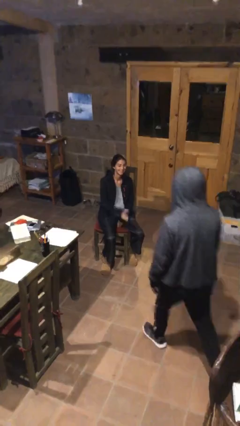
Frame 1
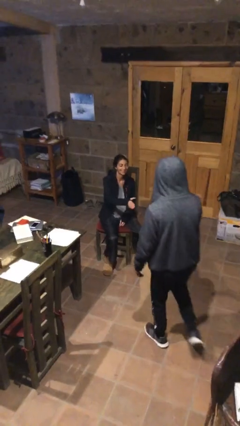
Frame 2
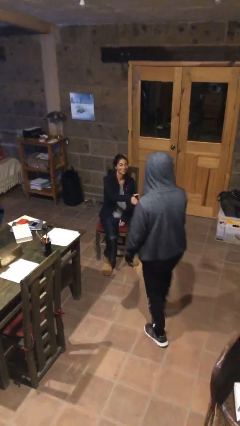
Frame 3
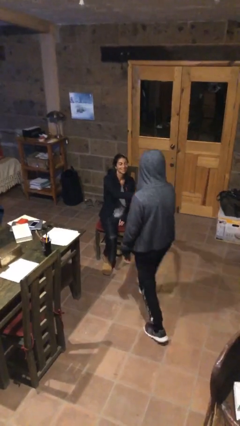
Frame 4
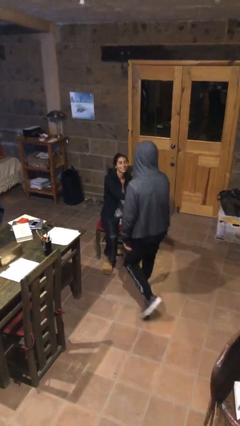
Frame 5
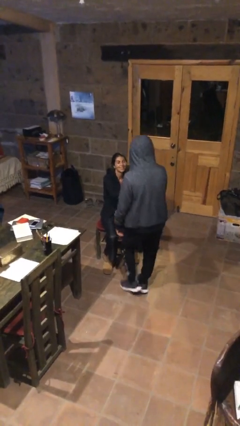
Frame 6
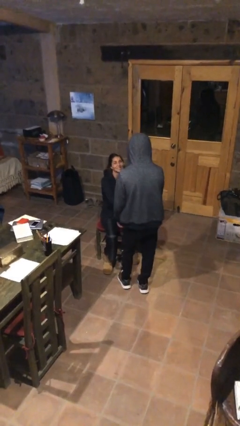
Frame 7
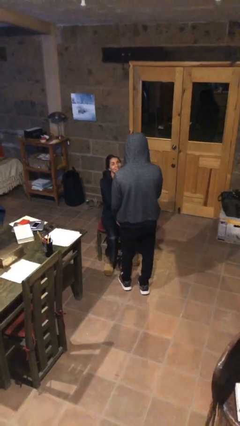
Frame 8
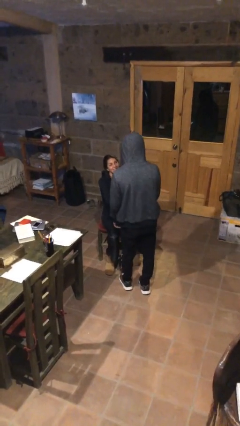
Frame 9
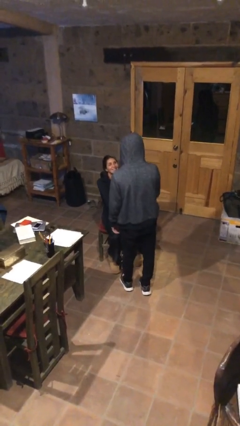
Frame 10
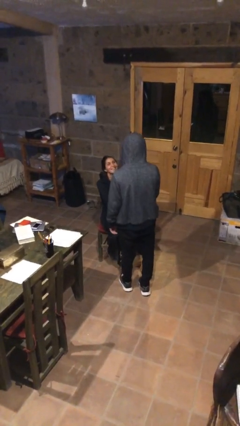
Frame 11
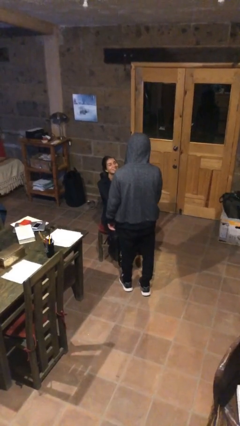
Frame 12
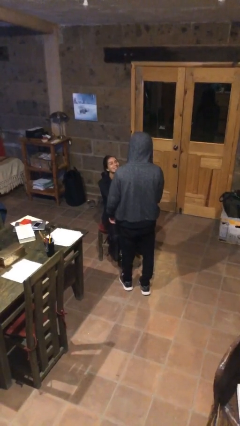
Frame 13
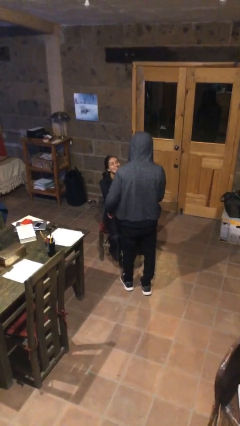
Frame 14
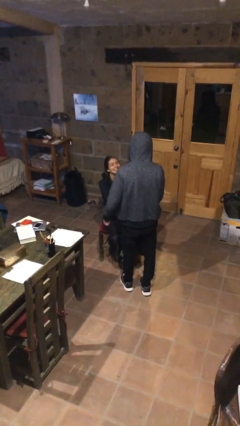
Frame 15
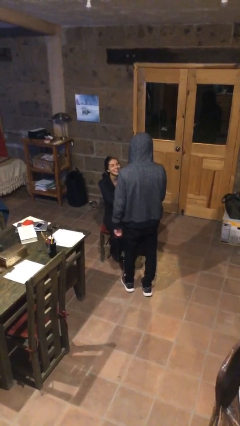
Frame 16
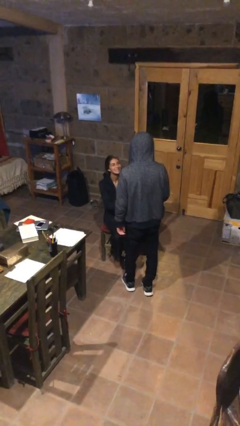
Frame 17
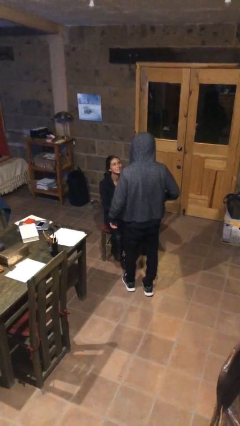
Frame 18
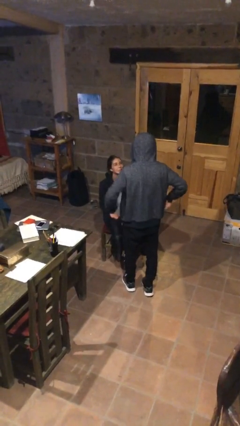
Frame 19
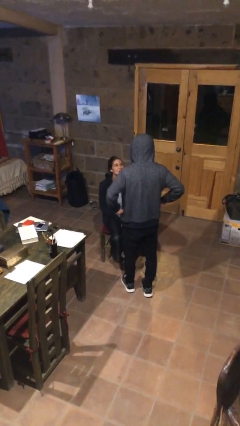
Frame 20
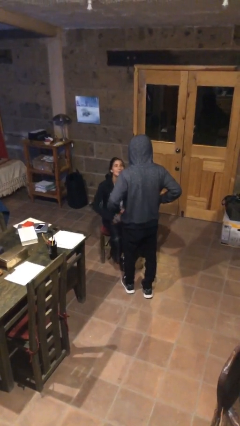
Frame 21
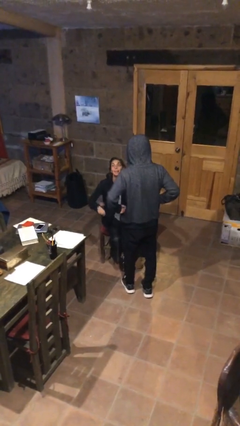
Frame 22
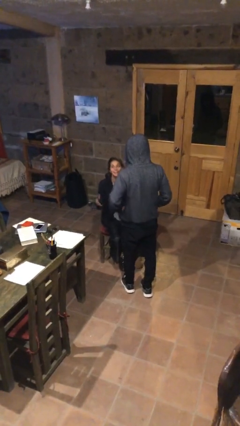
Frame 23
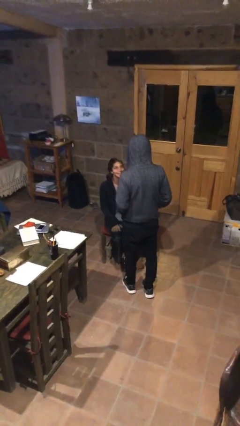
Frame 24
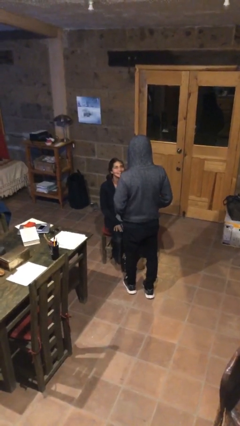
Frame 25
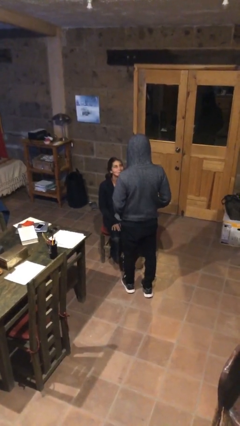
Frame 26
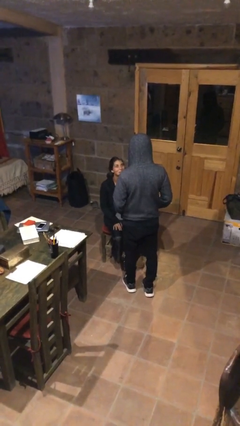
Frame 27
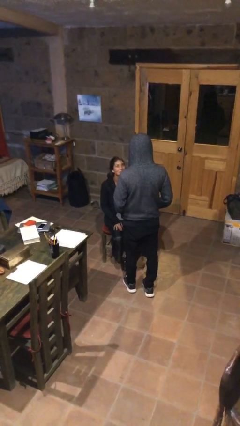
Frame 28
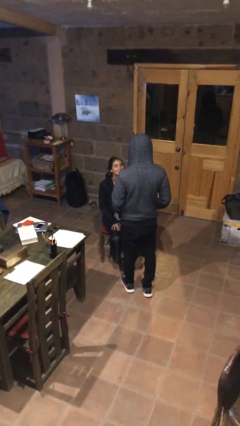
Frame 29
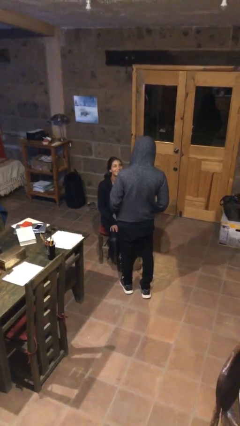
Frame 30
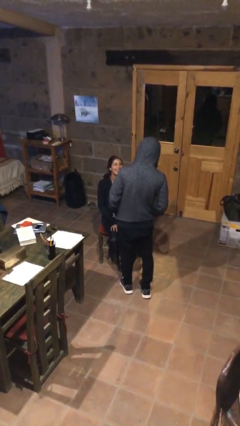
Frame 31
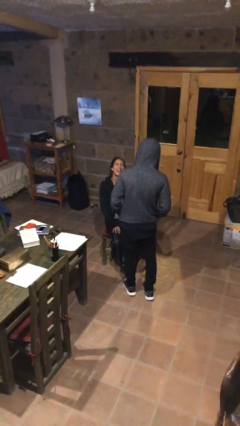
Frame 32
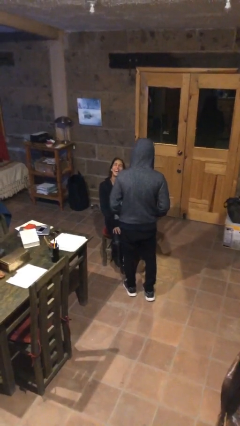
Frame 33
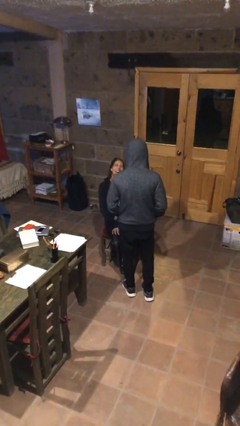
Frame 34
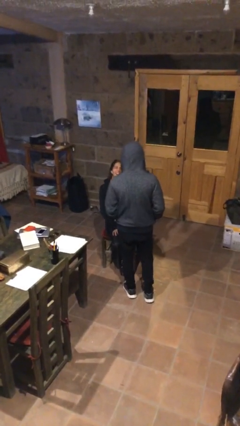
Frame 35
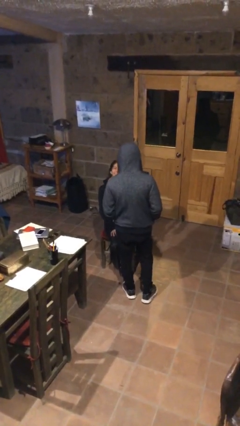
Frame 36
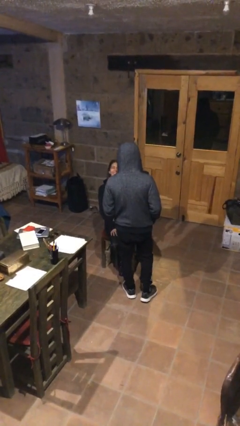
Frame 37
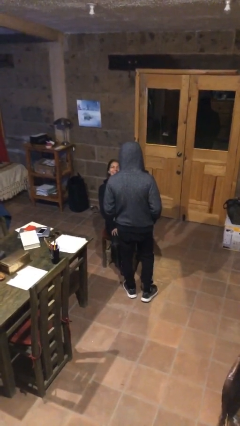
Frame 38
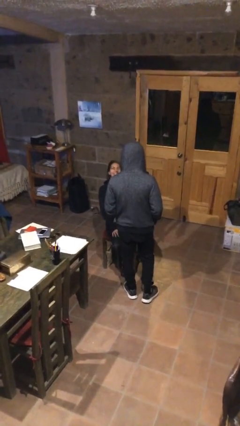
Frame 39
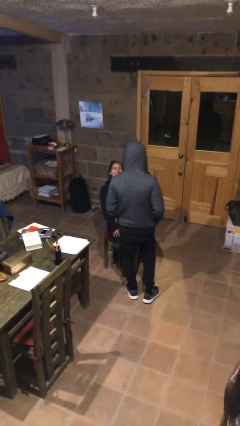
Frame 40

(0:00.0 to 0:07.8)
person shakes hand

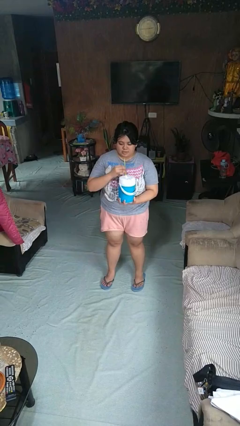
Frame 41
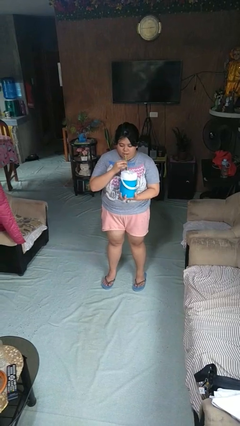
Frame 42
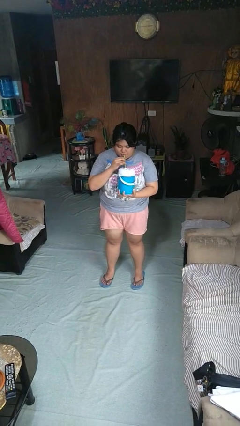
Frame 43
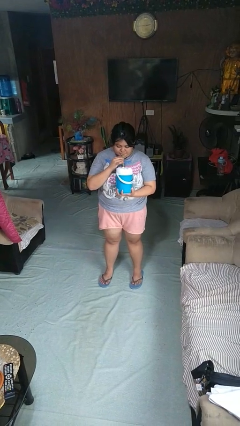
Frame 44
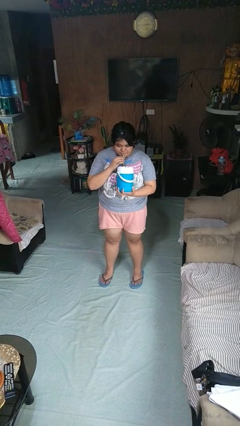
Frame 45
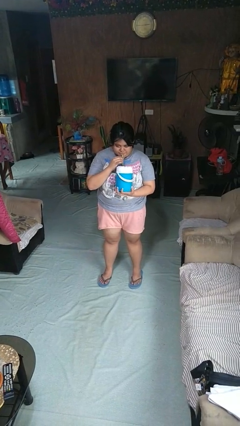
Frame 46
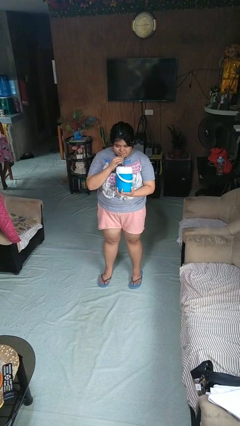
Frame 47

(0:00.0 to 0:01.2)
person drinks from straw

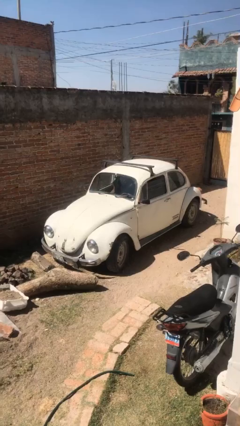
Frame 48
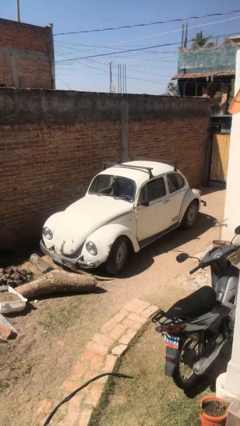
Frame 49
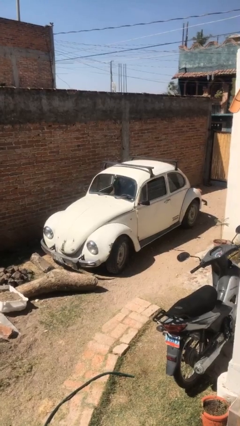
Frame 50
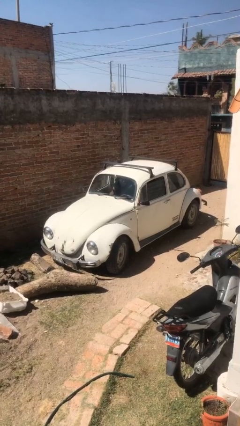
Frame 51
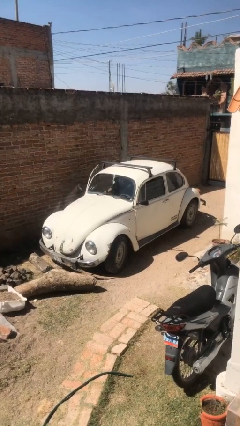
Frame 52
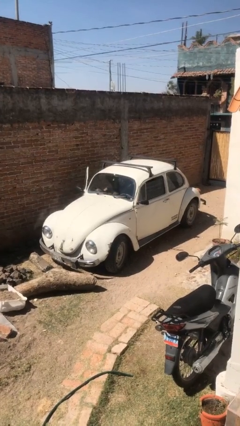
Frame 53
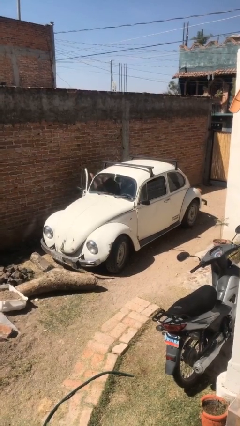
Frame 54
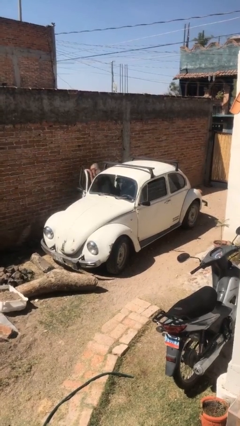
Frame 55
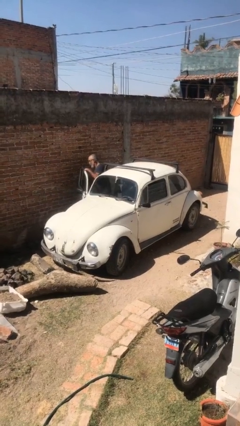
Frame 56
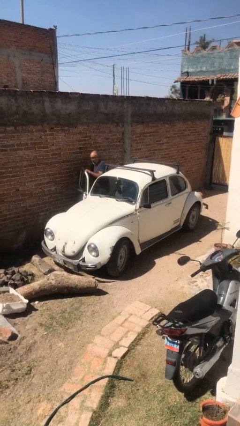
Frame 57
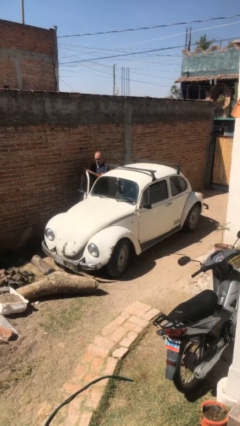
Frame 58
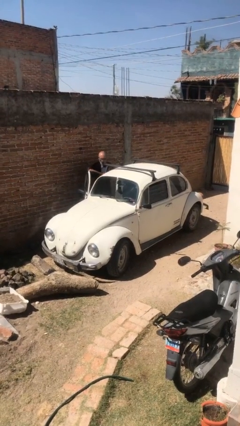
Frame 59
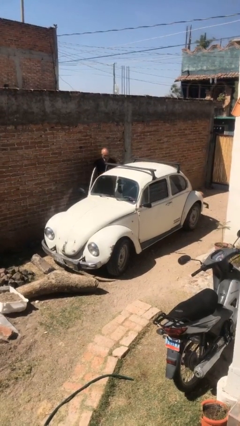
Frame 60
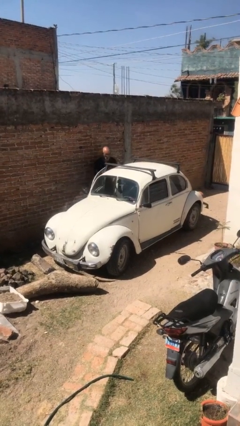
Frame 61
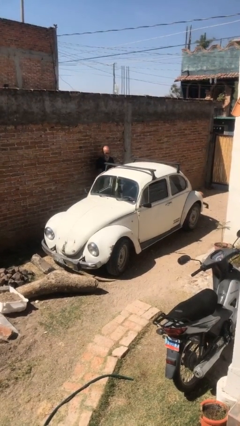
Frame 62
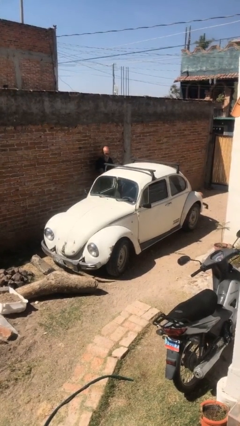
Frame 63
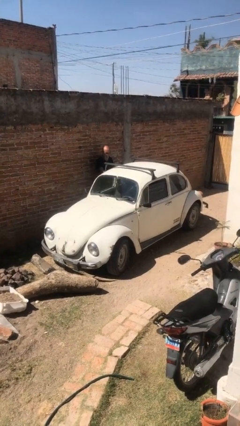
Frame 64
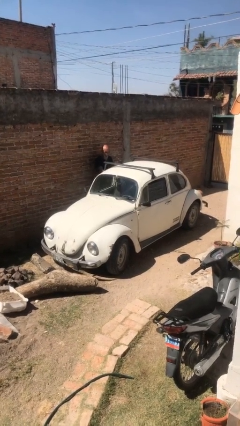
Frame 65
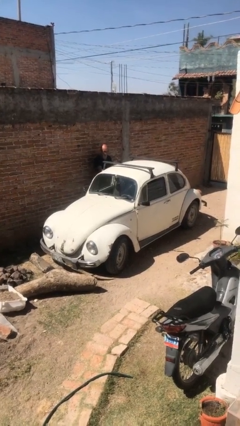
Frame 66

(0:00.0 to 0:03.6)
car drops off person

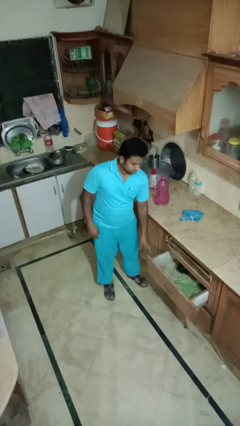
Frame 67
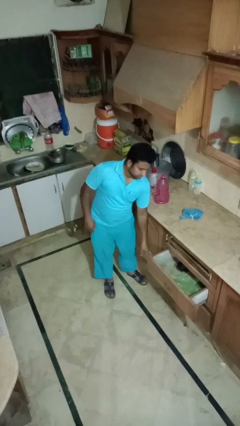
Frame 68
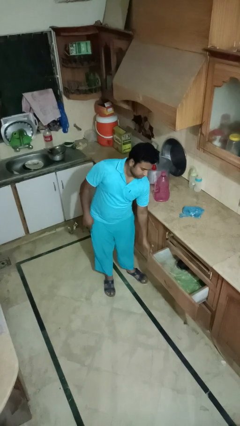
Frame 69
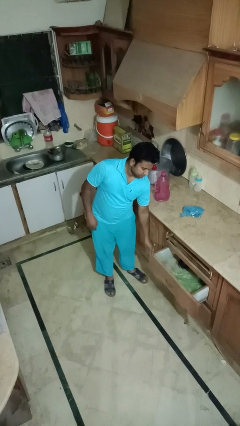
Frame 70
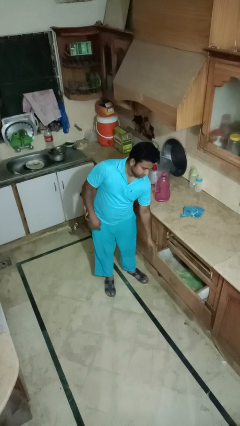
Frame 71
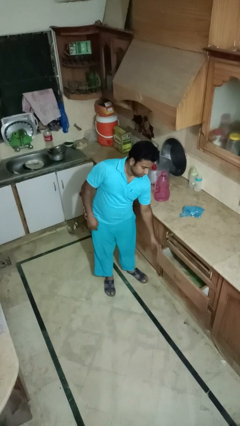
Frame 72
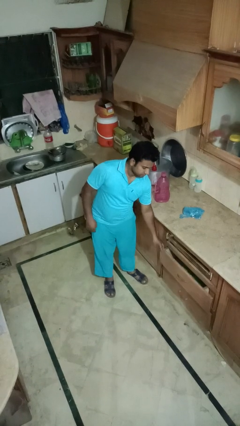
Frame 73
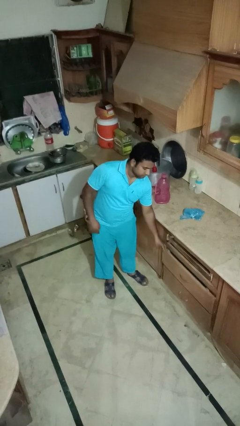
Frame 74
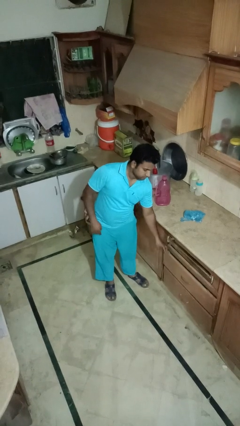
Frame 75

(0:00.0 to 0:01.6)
person closes kitchen drawer

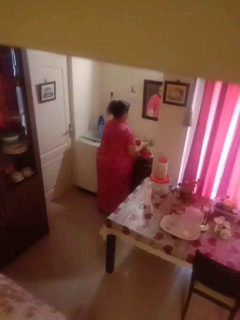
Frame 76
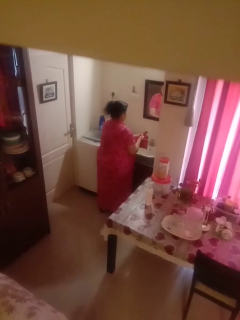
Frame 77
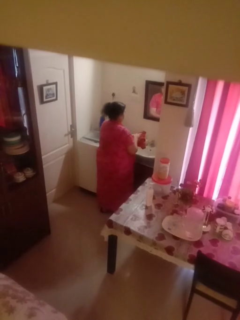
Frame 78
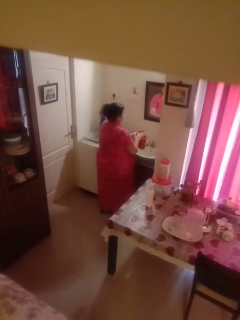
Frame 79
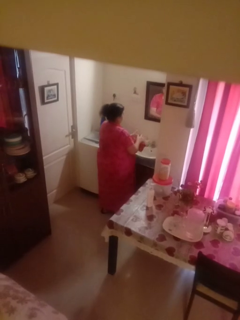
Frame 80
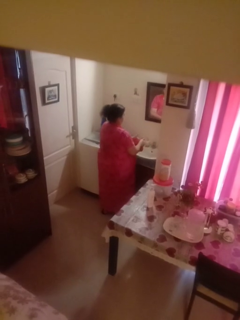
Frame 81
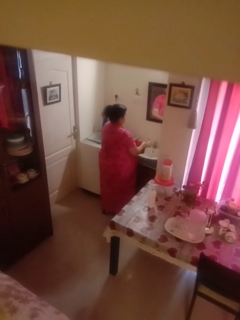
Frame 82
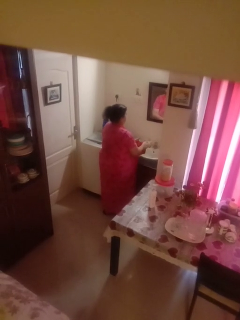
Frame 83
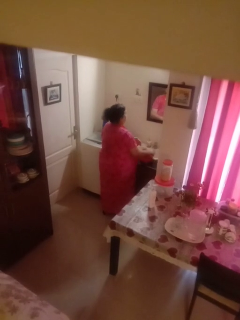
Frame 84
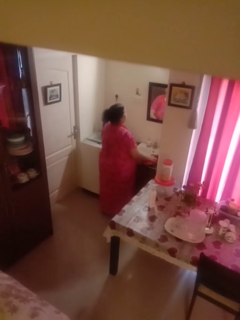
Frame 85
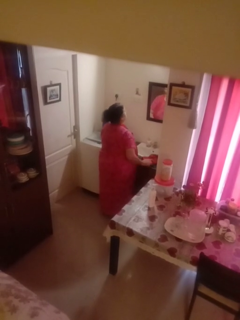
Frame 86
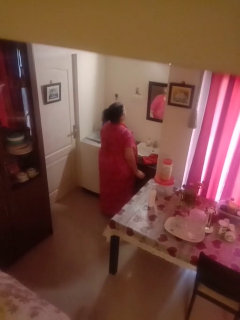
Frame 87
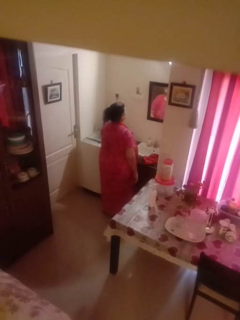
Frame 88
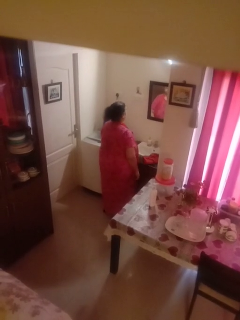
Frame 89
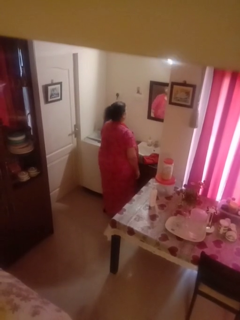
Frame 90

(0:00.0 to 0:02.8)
person dries hands with towel

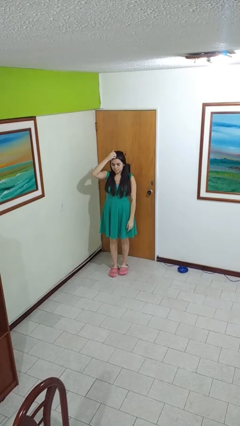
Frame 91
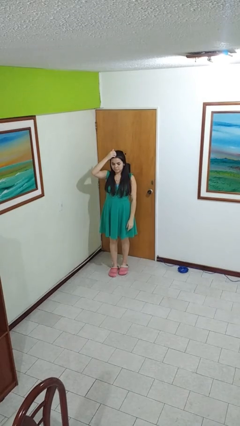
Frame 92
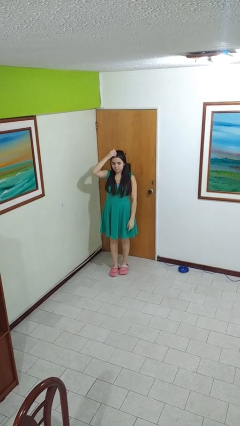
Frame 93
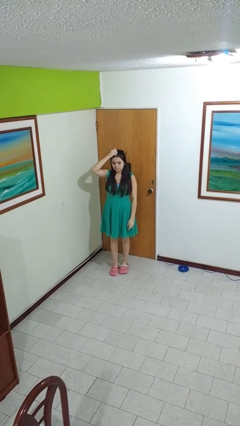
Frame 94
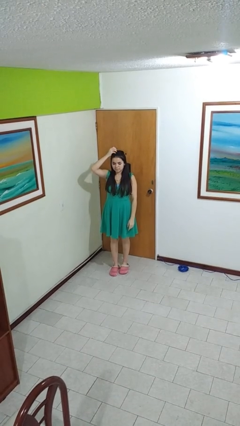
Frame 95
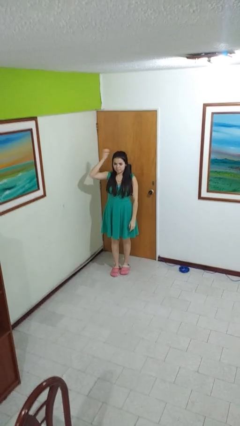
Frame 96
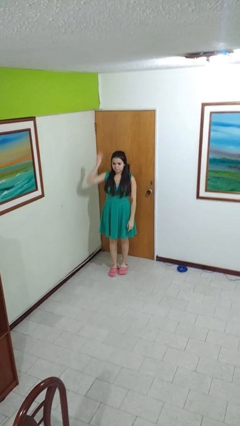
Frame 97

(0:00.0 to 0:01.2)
person scratches face
